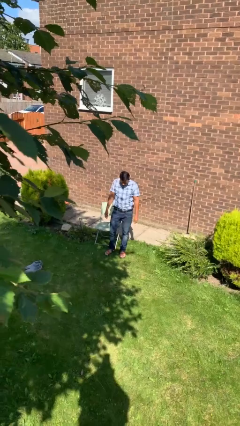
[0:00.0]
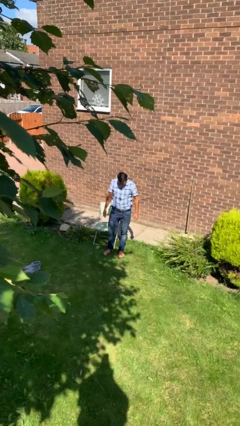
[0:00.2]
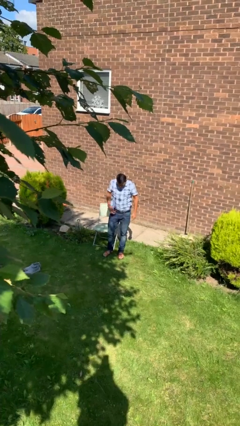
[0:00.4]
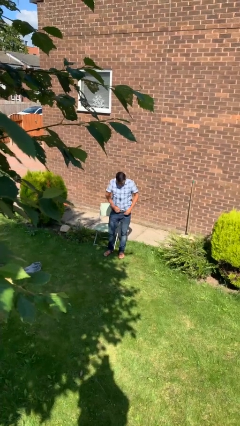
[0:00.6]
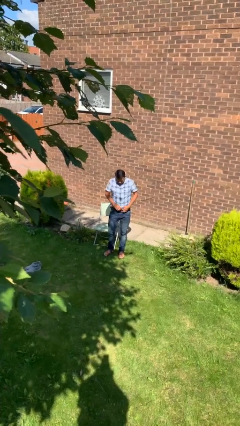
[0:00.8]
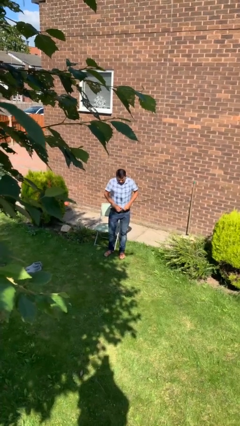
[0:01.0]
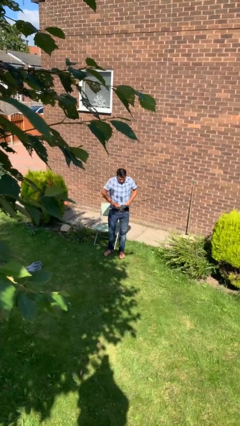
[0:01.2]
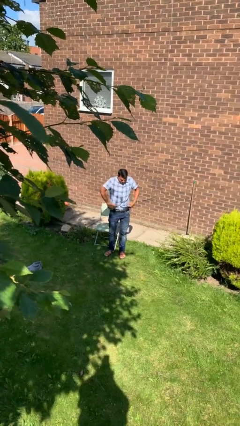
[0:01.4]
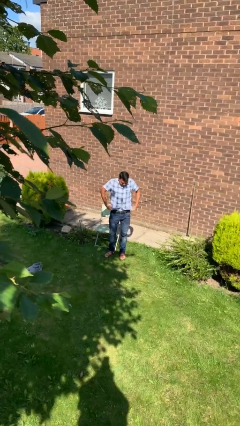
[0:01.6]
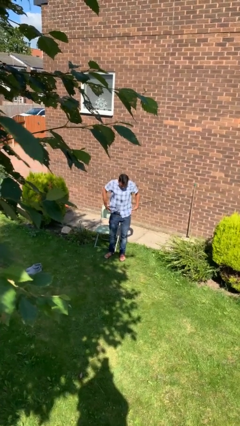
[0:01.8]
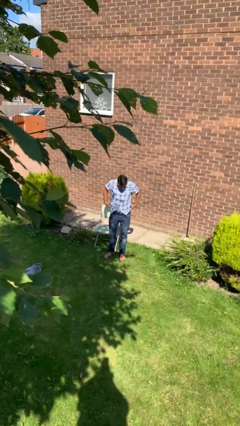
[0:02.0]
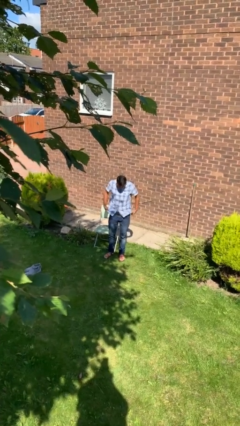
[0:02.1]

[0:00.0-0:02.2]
person untucks shirt

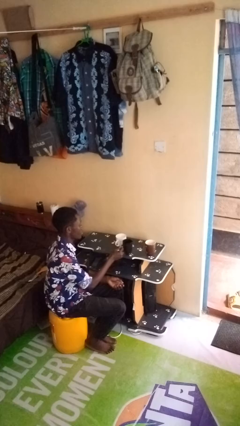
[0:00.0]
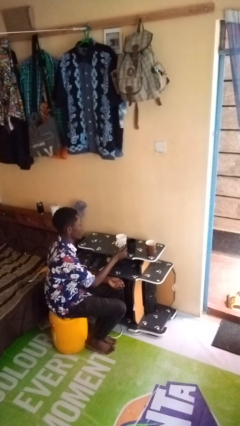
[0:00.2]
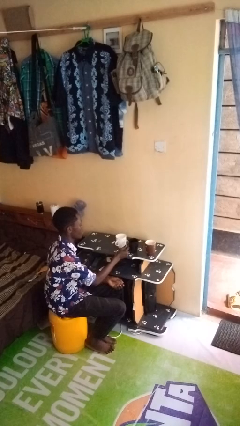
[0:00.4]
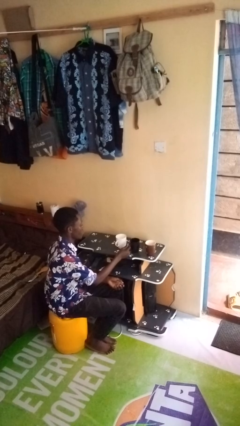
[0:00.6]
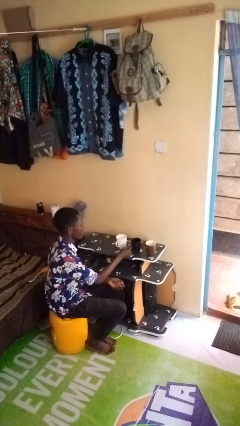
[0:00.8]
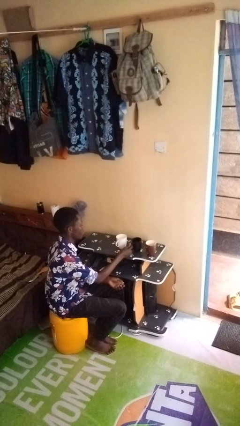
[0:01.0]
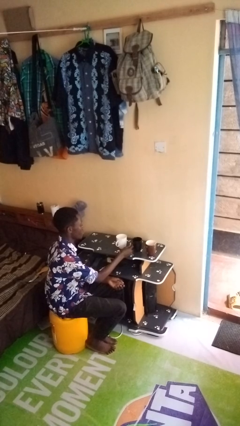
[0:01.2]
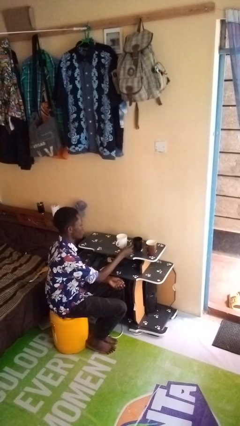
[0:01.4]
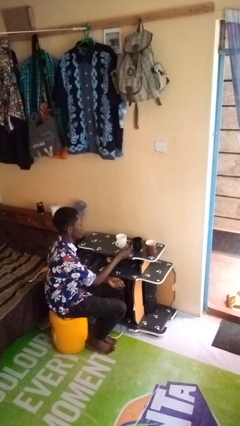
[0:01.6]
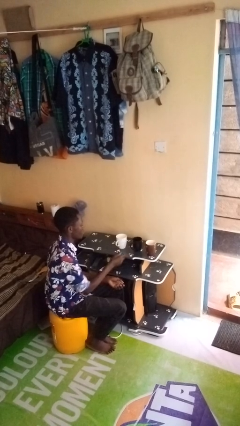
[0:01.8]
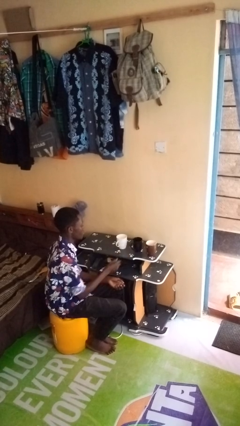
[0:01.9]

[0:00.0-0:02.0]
person puts down object on table

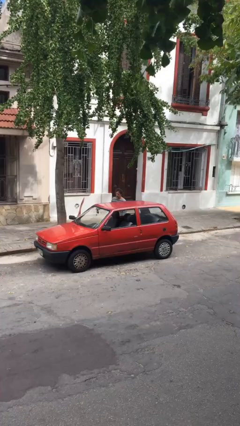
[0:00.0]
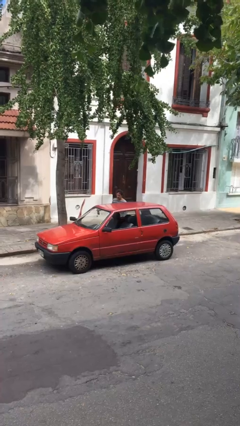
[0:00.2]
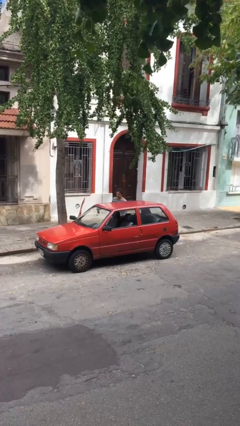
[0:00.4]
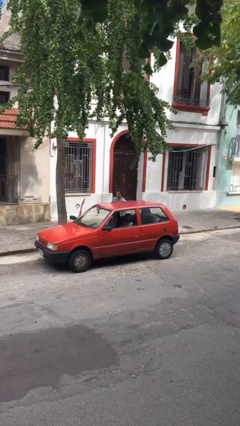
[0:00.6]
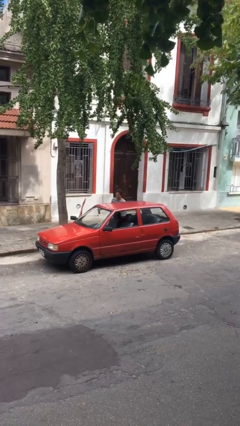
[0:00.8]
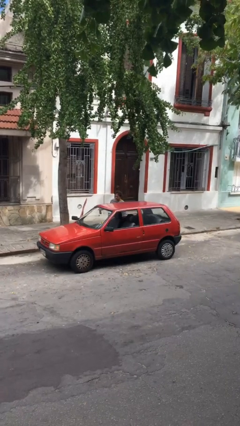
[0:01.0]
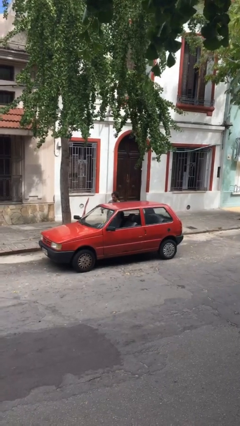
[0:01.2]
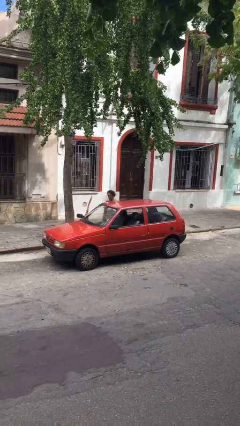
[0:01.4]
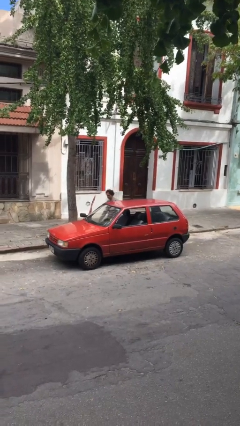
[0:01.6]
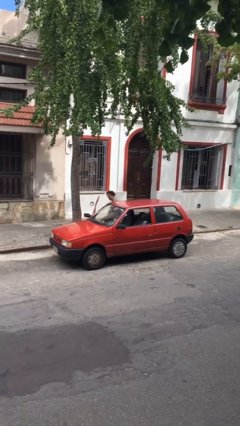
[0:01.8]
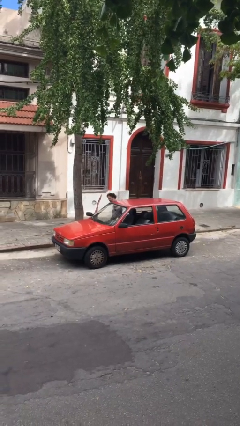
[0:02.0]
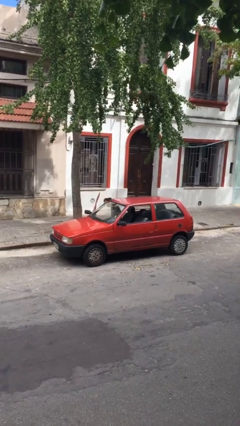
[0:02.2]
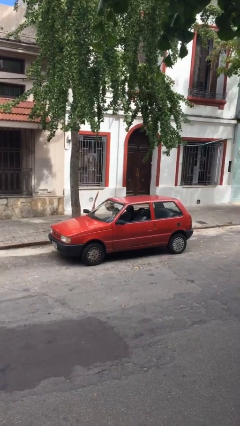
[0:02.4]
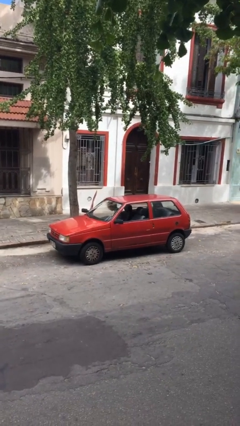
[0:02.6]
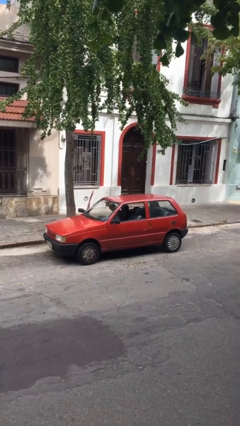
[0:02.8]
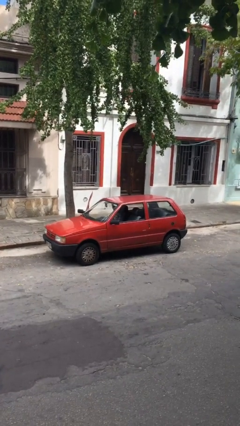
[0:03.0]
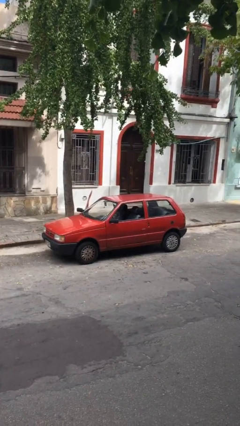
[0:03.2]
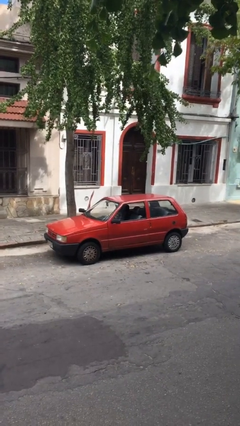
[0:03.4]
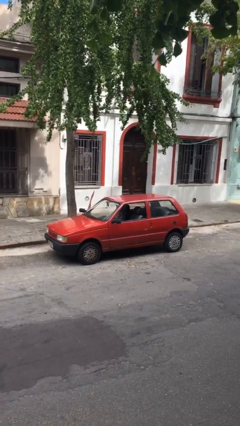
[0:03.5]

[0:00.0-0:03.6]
person enters car

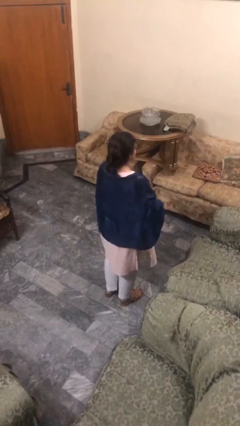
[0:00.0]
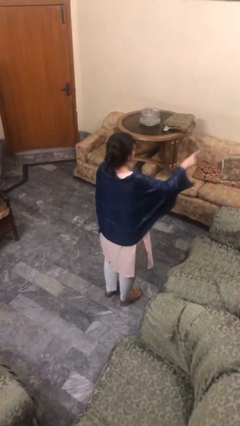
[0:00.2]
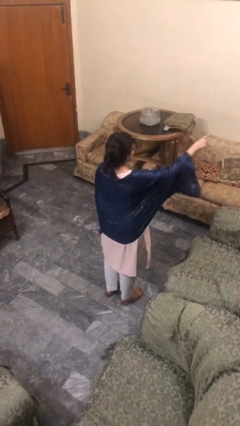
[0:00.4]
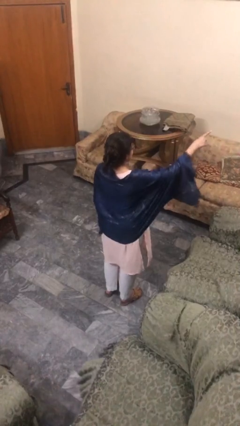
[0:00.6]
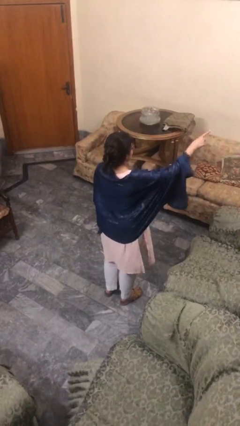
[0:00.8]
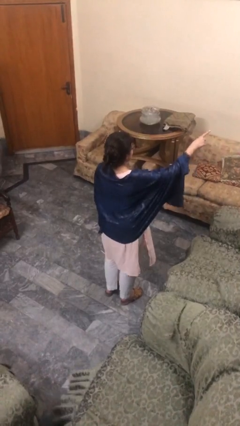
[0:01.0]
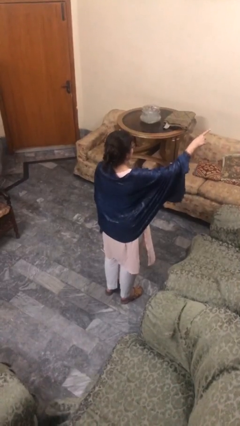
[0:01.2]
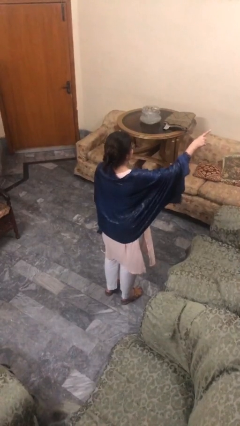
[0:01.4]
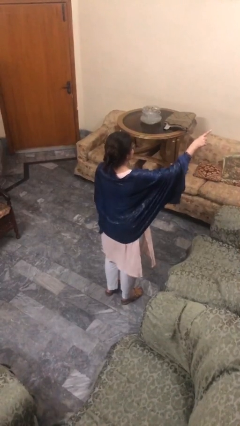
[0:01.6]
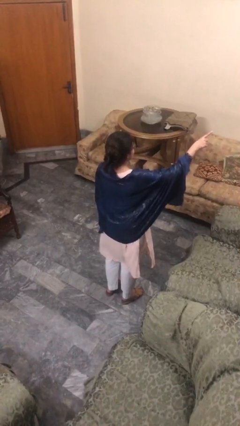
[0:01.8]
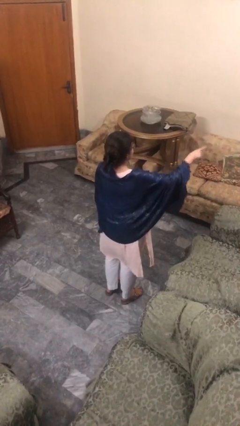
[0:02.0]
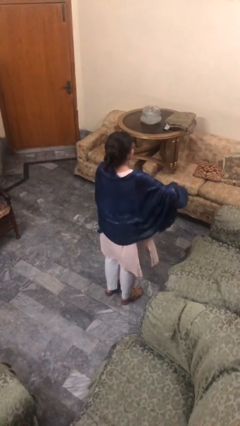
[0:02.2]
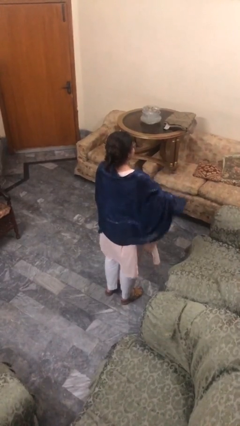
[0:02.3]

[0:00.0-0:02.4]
person points at person

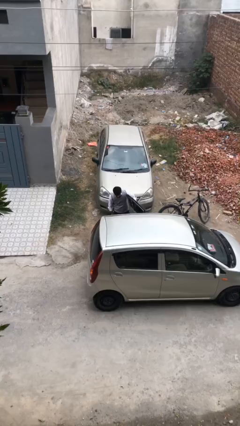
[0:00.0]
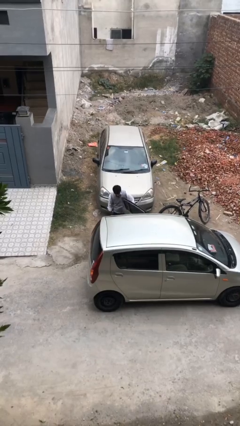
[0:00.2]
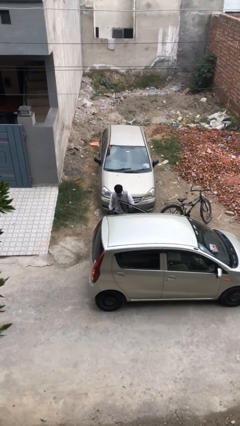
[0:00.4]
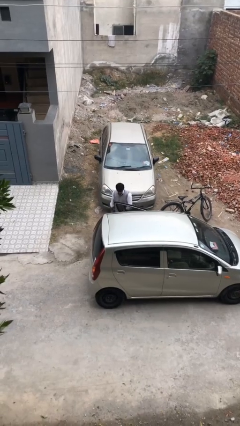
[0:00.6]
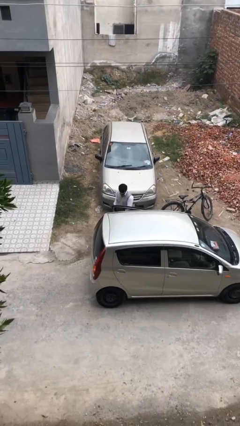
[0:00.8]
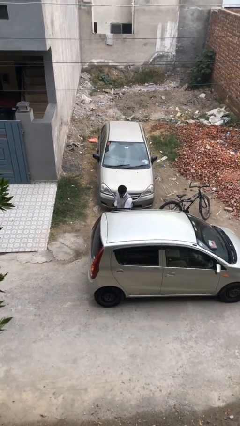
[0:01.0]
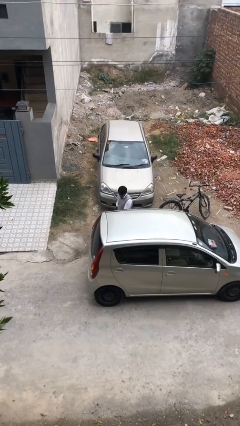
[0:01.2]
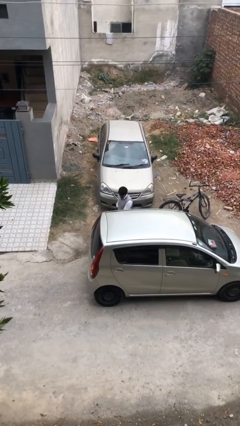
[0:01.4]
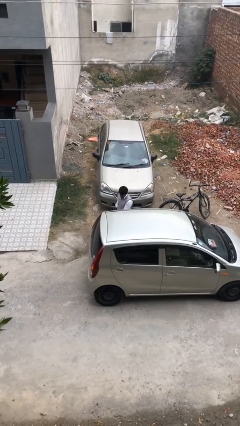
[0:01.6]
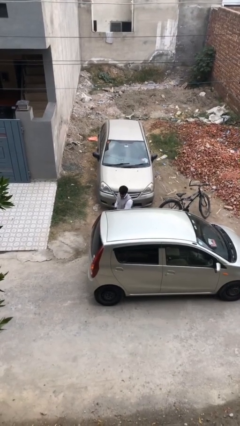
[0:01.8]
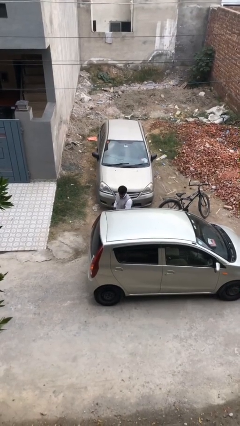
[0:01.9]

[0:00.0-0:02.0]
person closes car door

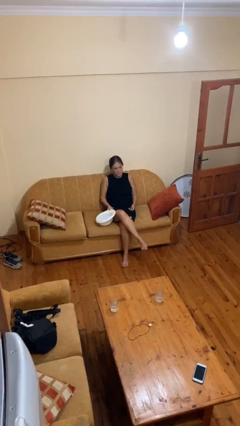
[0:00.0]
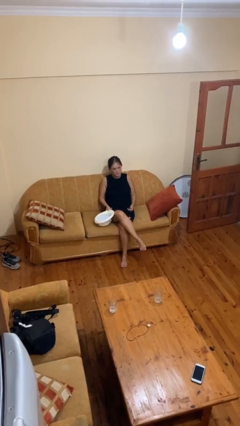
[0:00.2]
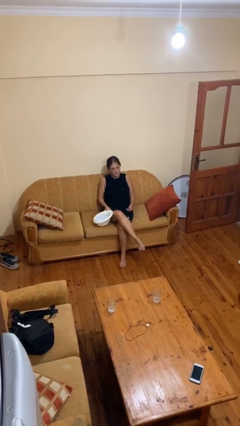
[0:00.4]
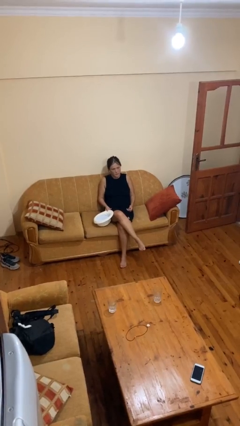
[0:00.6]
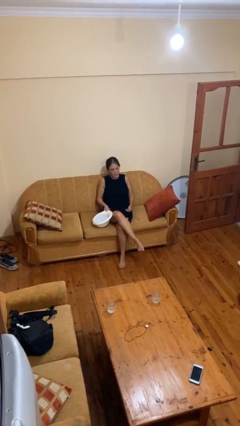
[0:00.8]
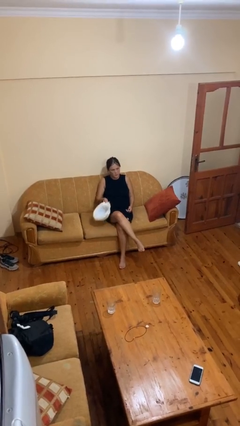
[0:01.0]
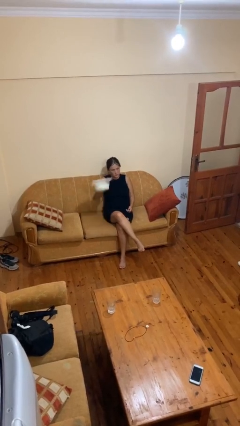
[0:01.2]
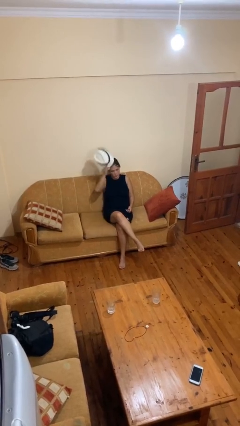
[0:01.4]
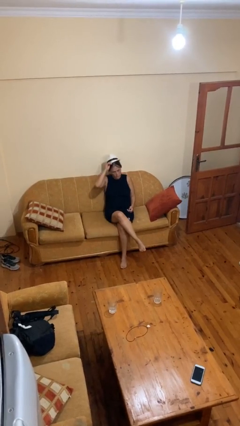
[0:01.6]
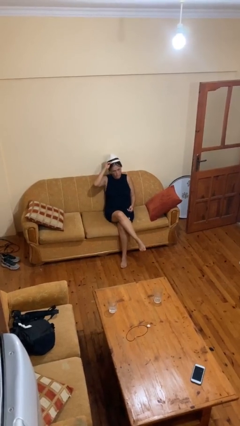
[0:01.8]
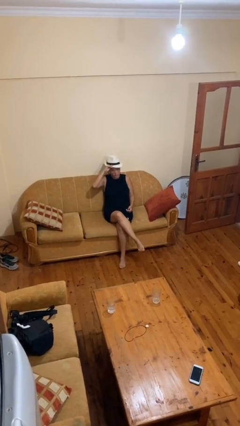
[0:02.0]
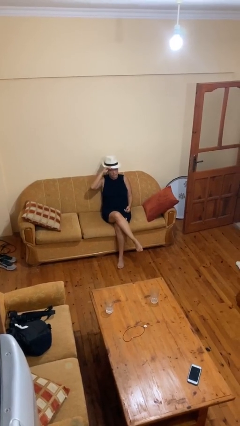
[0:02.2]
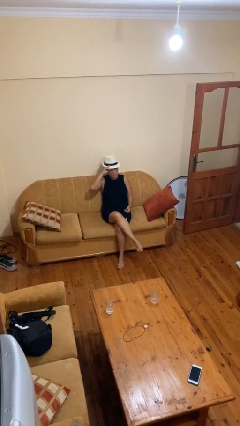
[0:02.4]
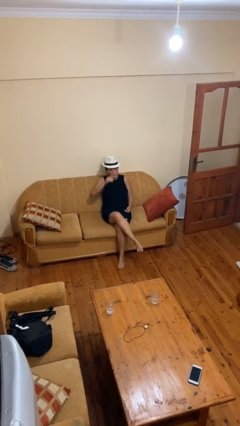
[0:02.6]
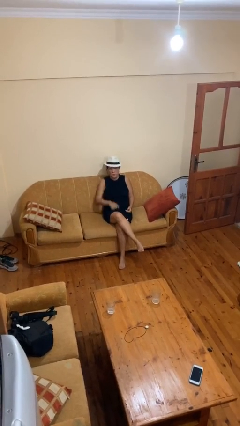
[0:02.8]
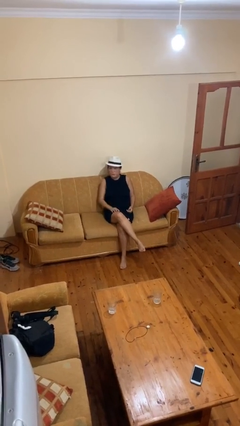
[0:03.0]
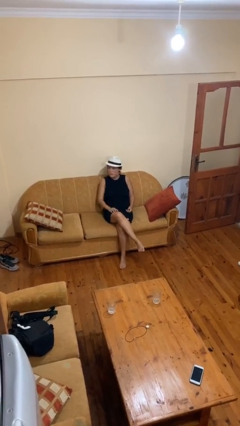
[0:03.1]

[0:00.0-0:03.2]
person puts on hat

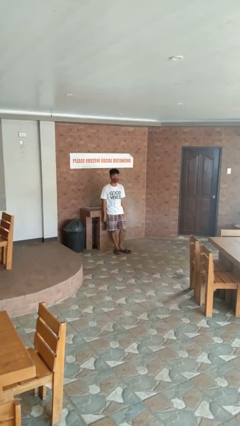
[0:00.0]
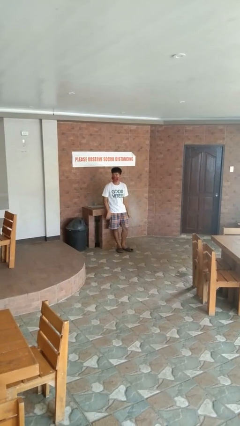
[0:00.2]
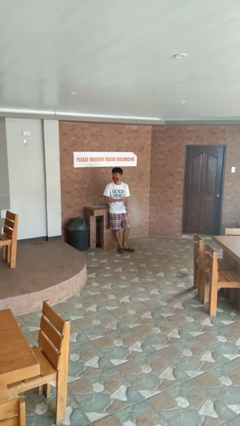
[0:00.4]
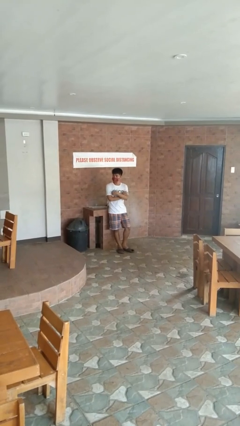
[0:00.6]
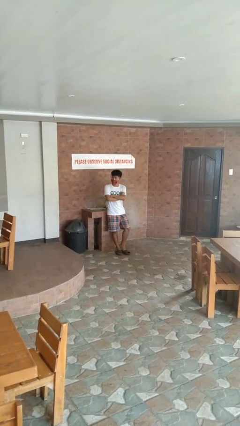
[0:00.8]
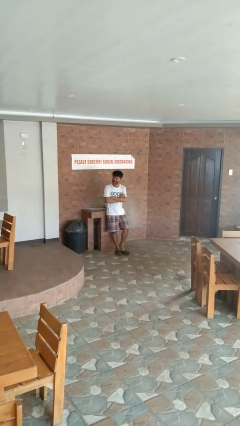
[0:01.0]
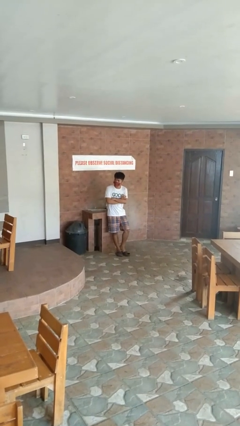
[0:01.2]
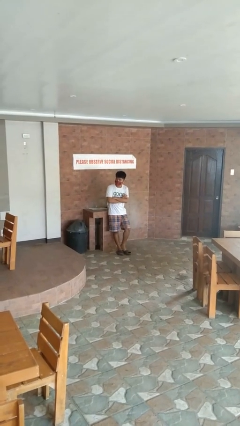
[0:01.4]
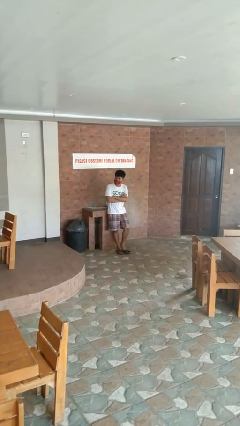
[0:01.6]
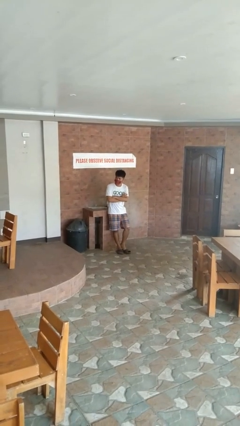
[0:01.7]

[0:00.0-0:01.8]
person crosses arms

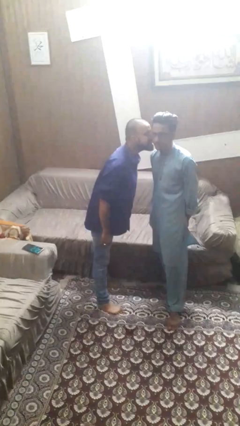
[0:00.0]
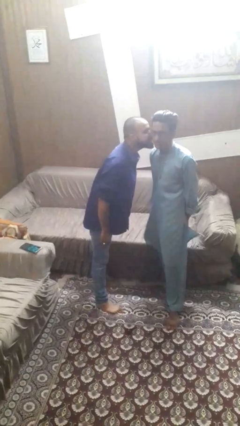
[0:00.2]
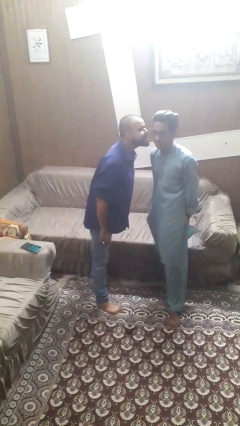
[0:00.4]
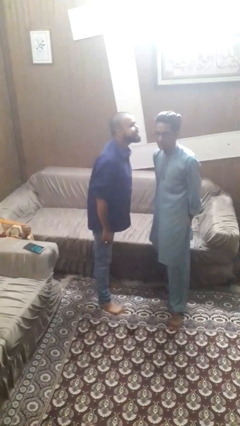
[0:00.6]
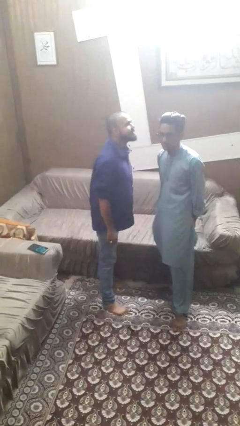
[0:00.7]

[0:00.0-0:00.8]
person kisses cheek of person
